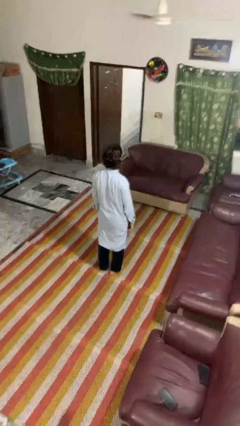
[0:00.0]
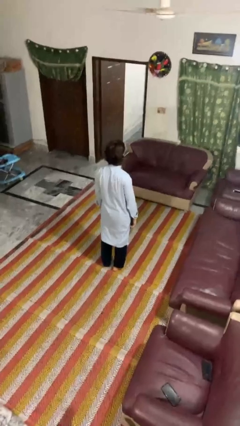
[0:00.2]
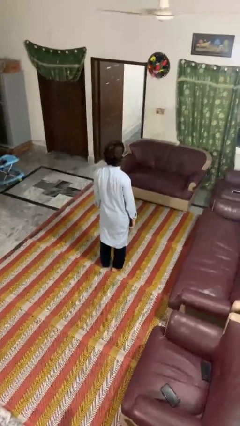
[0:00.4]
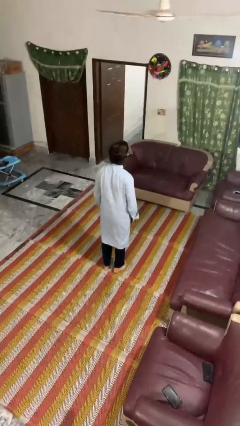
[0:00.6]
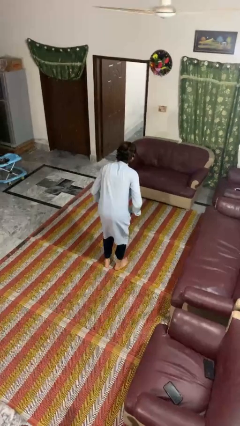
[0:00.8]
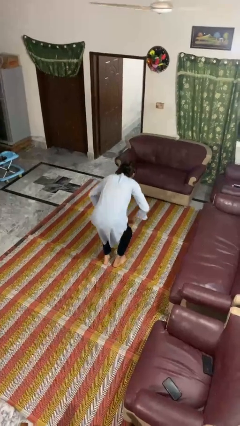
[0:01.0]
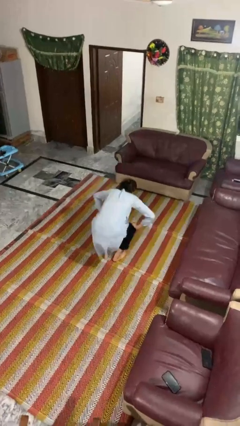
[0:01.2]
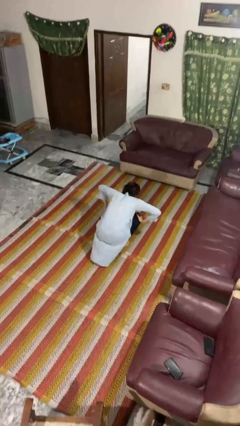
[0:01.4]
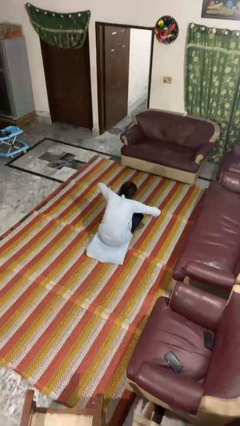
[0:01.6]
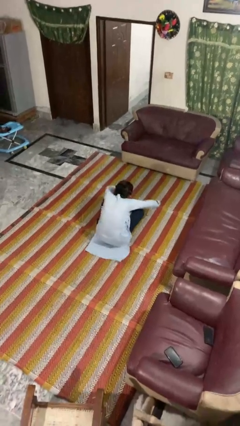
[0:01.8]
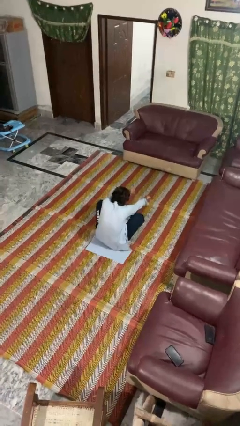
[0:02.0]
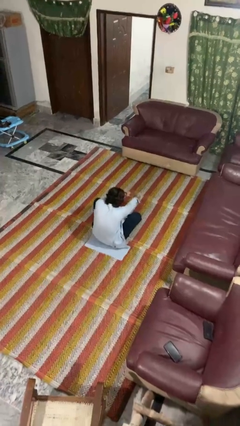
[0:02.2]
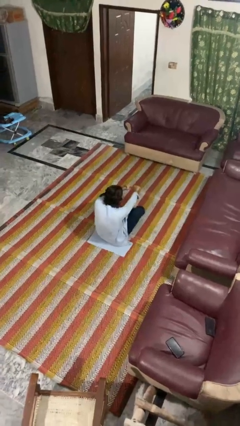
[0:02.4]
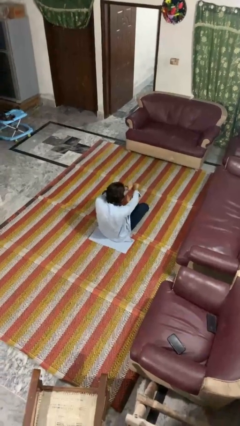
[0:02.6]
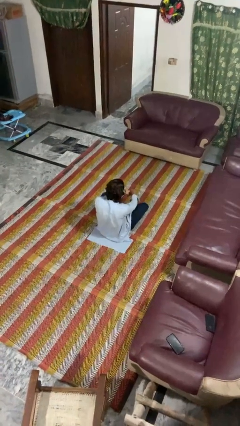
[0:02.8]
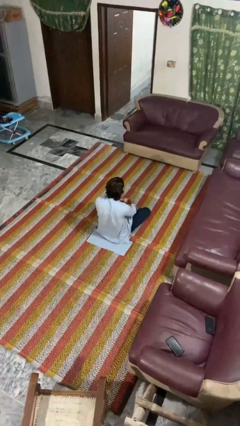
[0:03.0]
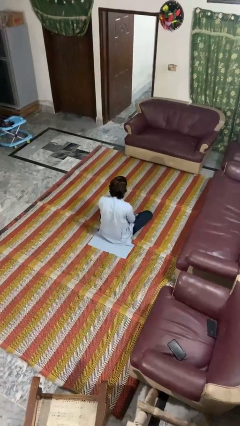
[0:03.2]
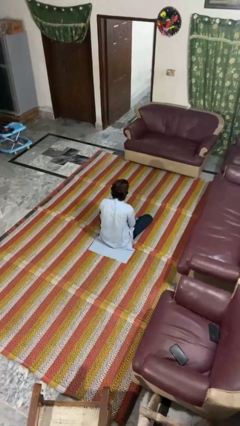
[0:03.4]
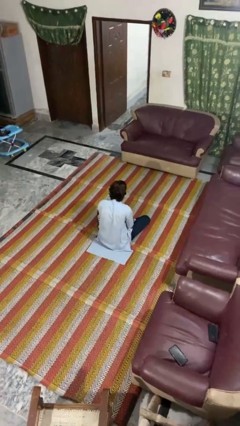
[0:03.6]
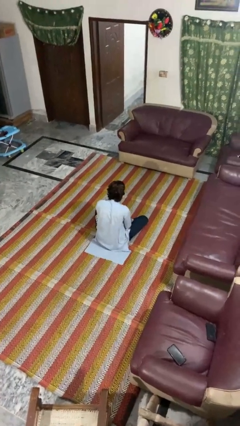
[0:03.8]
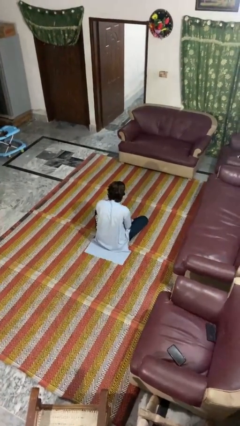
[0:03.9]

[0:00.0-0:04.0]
person sits crisscross

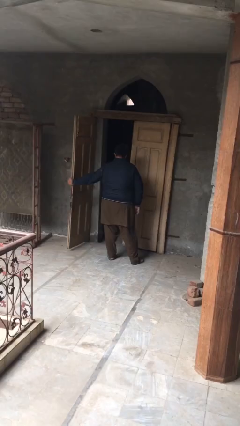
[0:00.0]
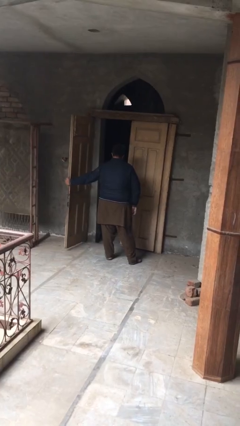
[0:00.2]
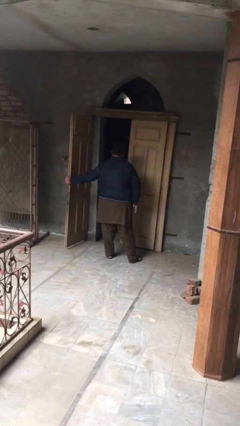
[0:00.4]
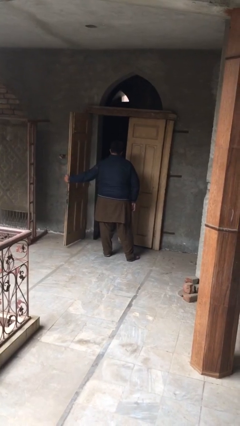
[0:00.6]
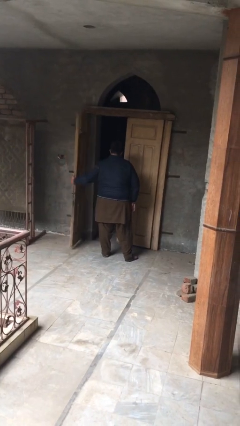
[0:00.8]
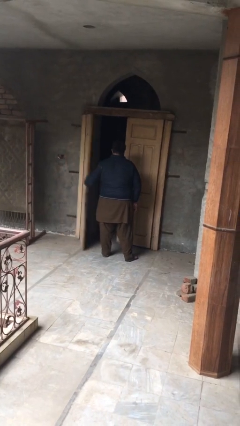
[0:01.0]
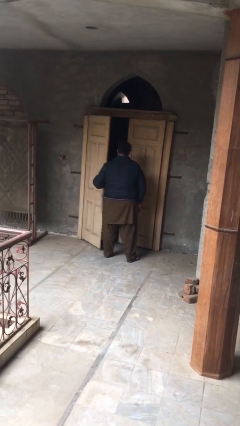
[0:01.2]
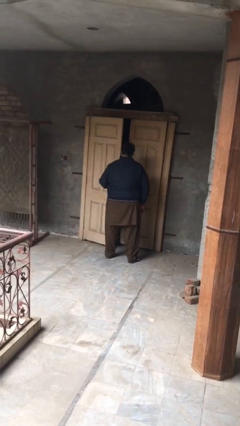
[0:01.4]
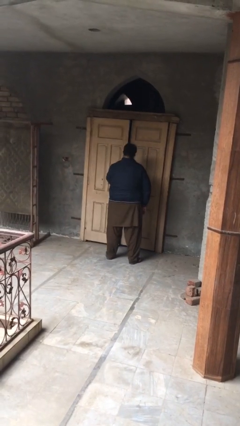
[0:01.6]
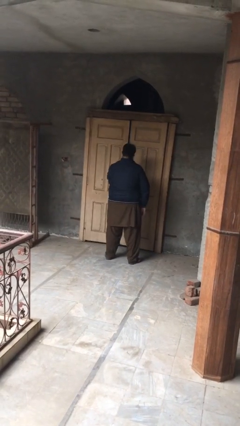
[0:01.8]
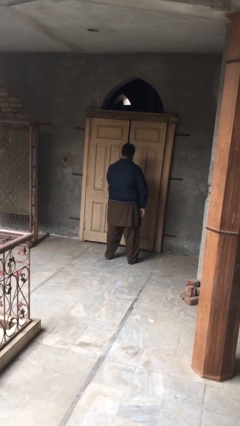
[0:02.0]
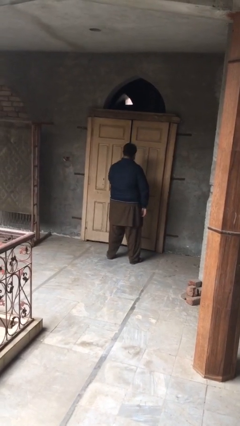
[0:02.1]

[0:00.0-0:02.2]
person closes facility door

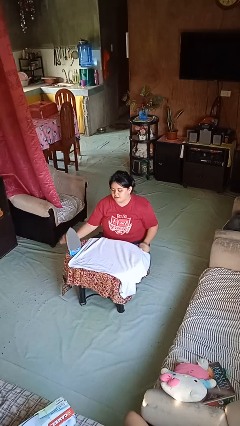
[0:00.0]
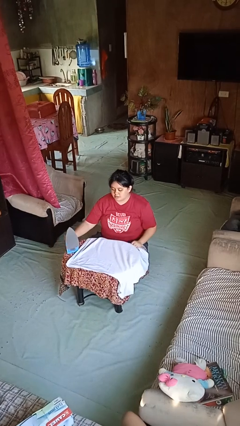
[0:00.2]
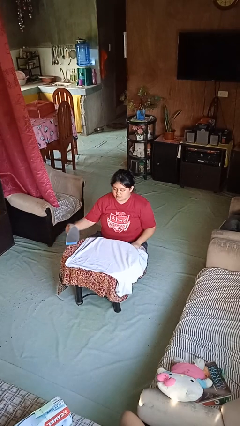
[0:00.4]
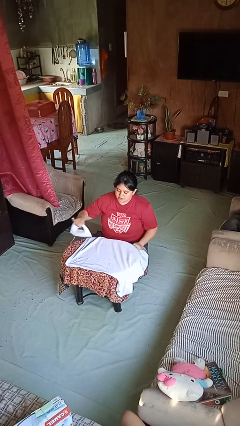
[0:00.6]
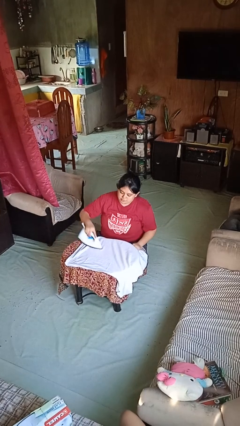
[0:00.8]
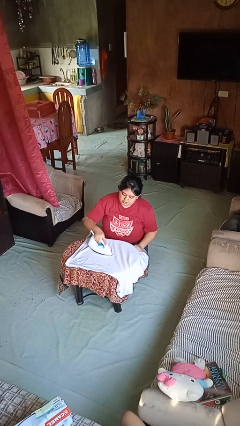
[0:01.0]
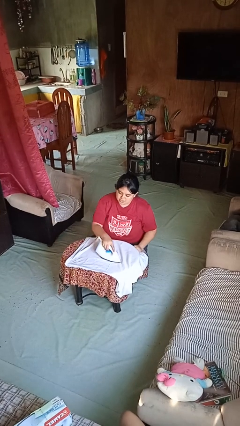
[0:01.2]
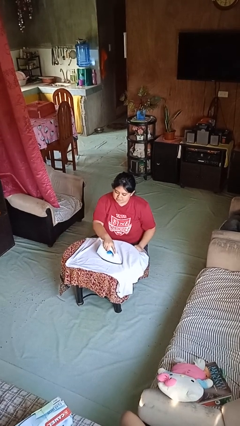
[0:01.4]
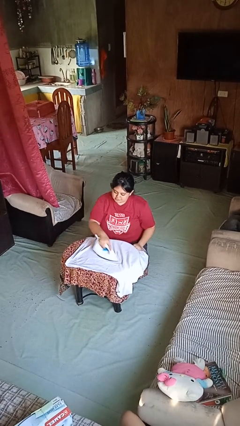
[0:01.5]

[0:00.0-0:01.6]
person irons clothes

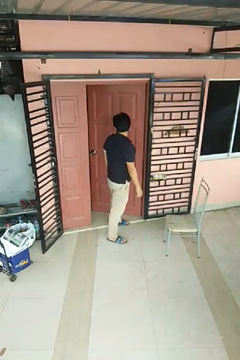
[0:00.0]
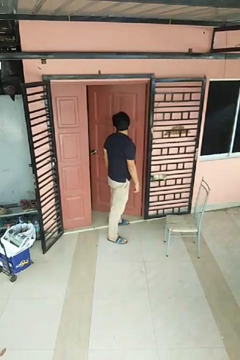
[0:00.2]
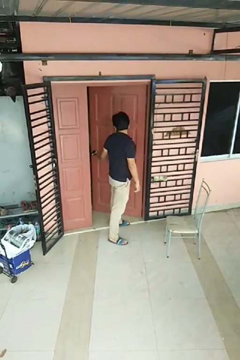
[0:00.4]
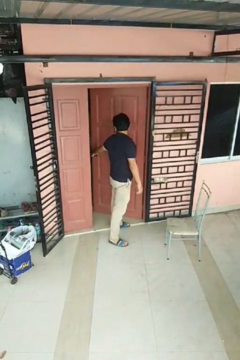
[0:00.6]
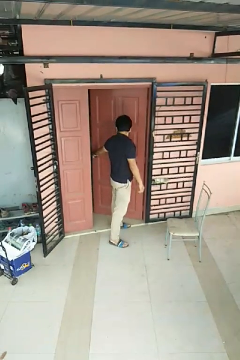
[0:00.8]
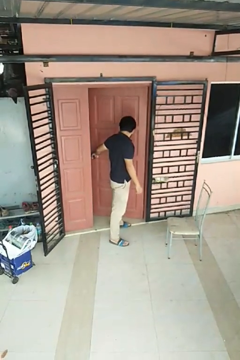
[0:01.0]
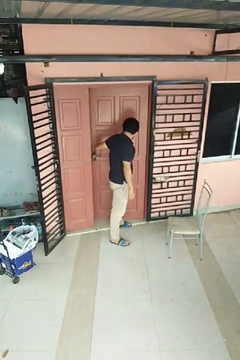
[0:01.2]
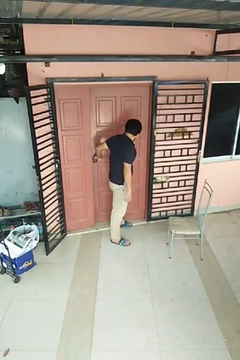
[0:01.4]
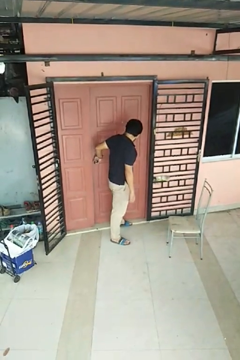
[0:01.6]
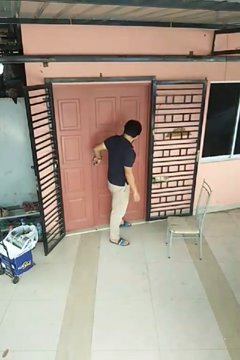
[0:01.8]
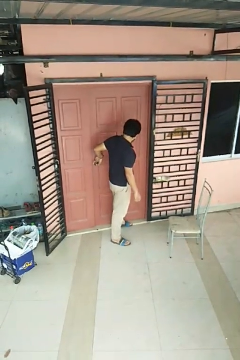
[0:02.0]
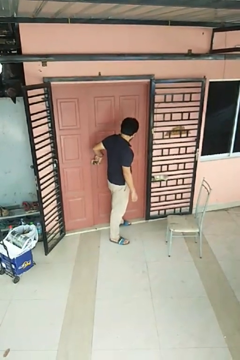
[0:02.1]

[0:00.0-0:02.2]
person closes door with hip

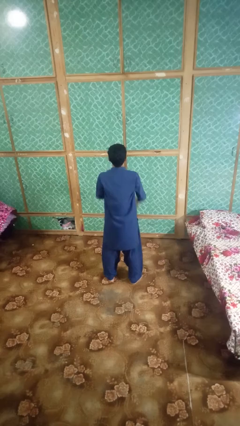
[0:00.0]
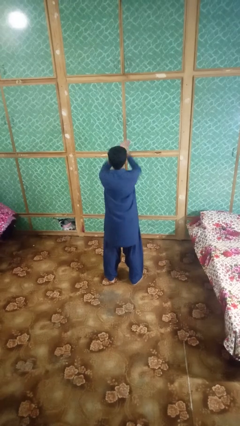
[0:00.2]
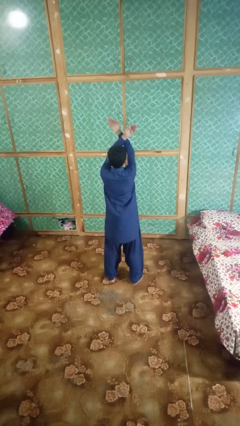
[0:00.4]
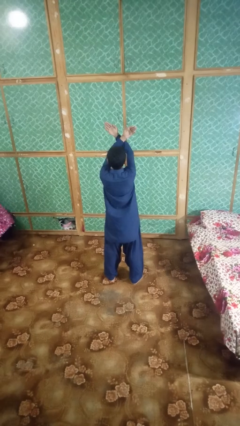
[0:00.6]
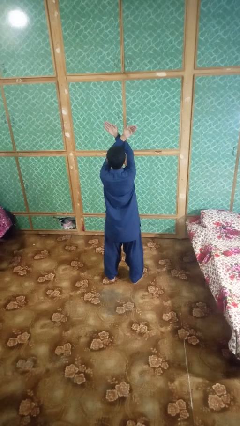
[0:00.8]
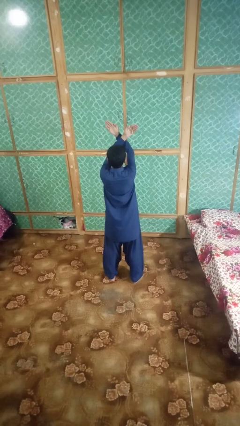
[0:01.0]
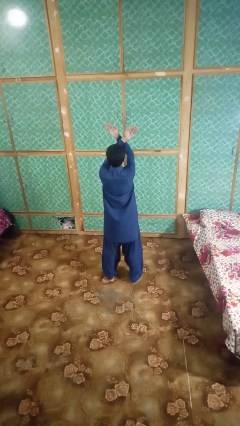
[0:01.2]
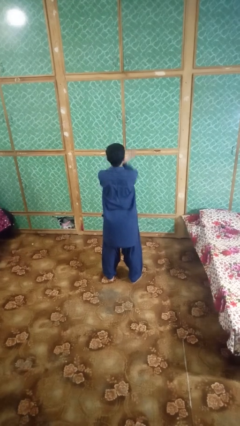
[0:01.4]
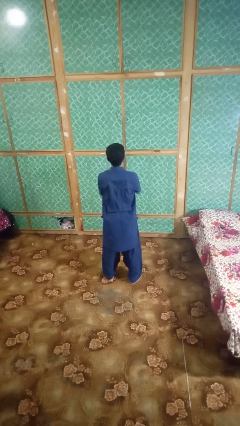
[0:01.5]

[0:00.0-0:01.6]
person gestures arms x

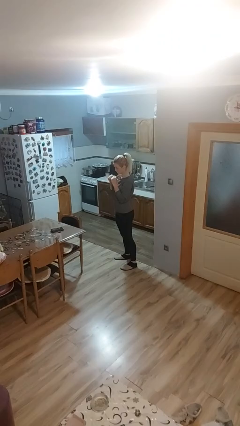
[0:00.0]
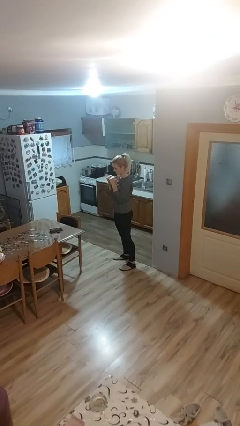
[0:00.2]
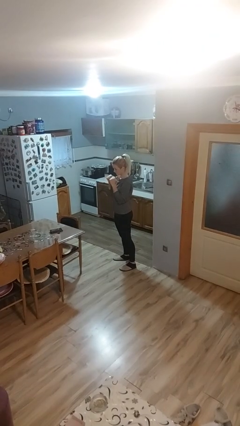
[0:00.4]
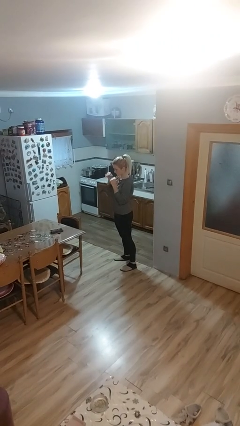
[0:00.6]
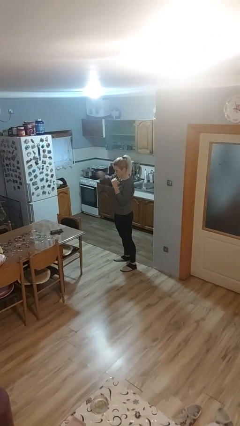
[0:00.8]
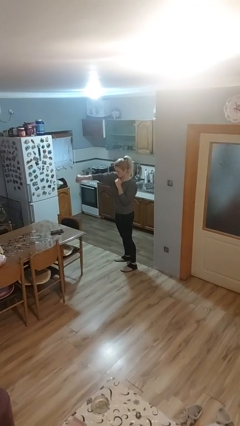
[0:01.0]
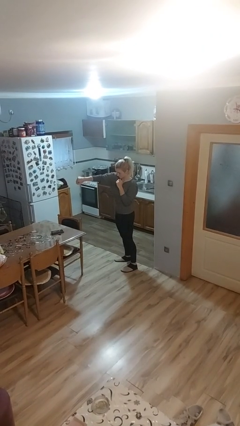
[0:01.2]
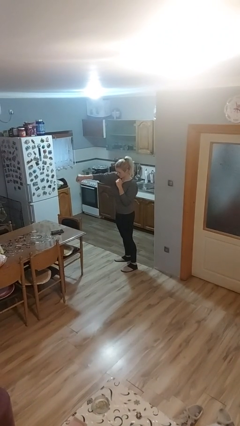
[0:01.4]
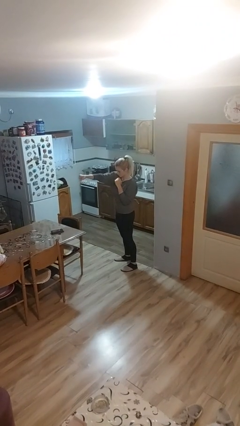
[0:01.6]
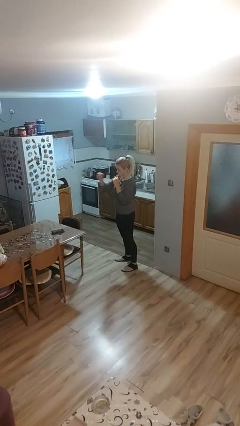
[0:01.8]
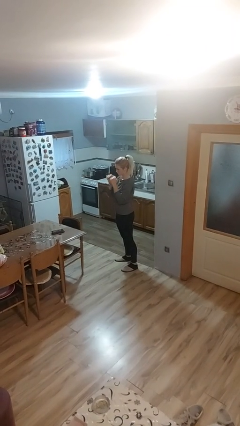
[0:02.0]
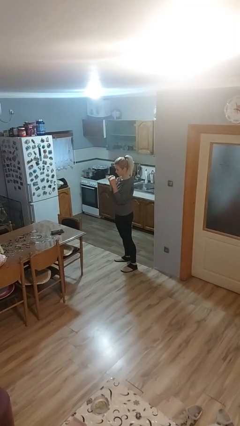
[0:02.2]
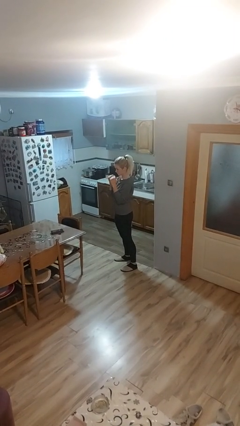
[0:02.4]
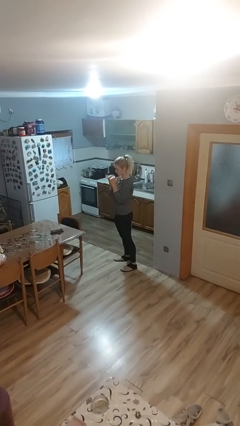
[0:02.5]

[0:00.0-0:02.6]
person punches

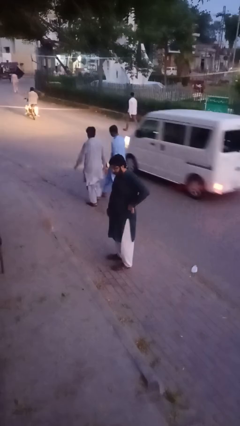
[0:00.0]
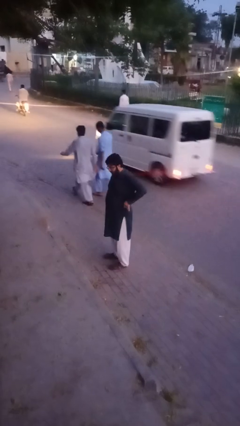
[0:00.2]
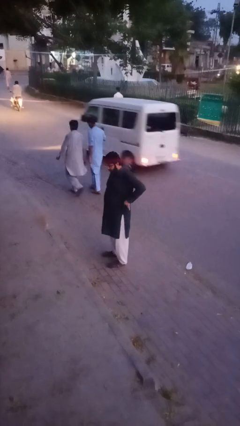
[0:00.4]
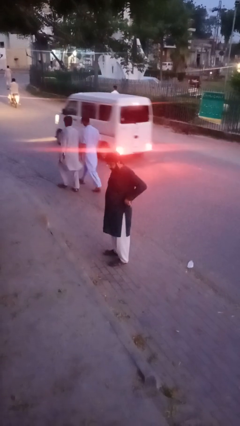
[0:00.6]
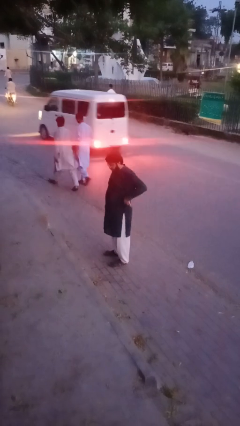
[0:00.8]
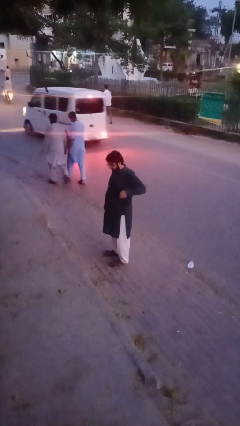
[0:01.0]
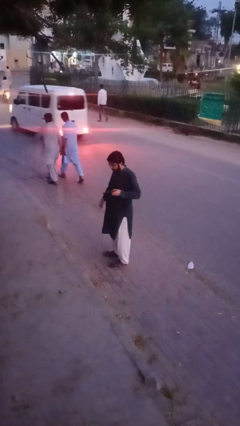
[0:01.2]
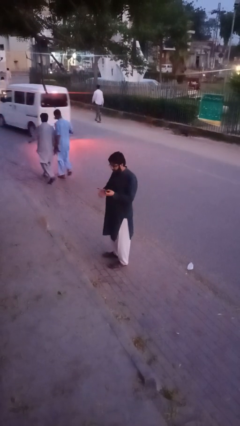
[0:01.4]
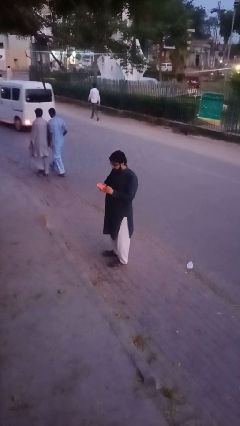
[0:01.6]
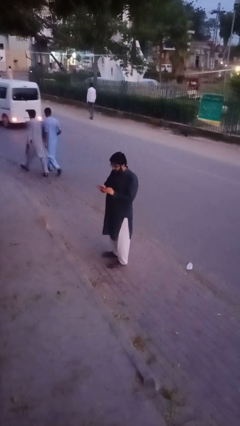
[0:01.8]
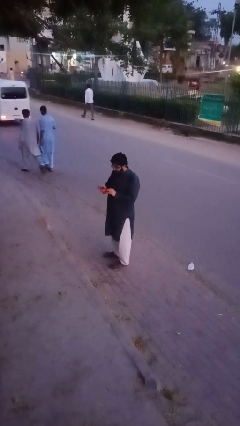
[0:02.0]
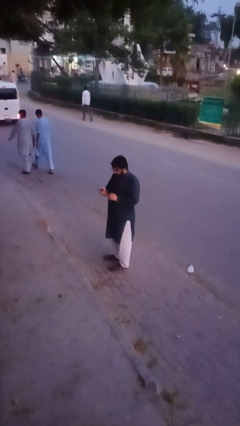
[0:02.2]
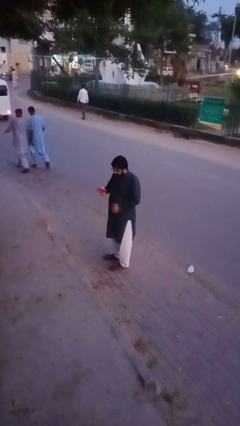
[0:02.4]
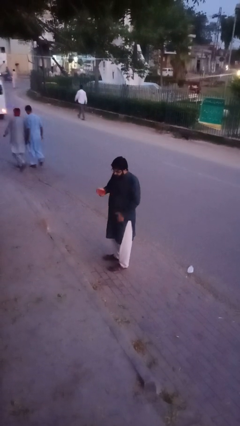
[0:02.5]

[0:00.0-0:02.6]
person takes phone from pocket

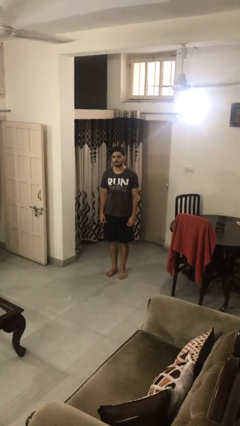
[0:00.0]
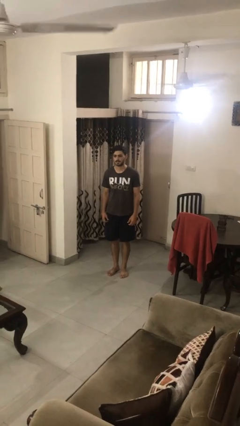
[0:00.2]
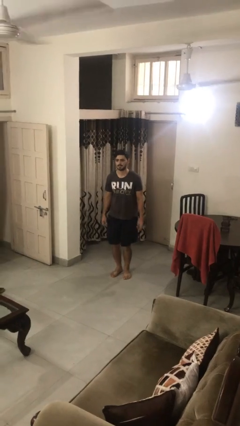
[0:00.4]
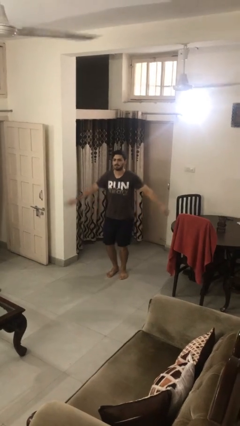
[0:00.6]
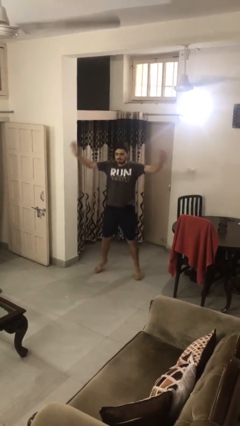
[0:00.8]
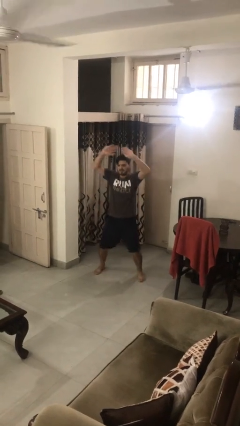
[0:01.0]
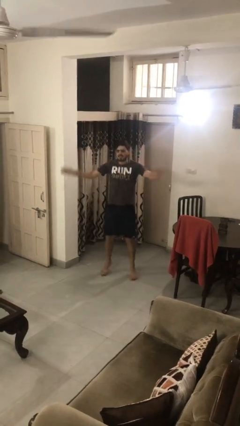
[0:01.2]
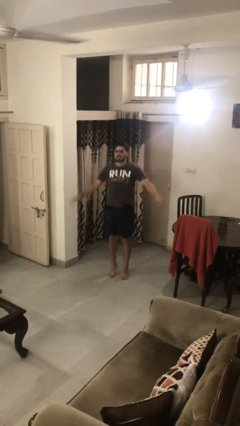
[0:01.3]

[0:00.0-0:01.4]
person exercises with jumping jacks
